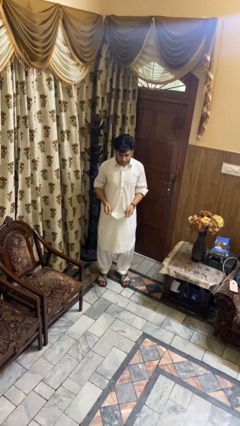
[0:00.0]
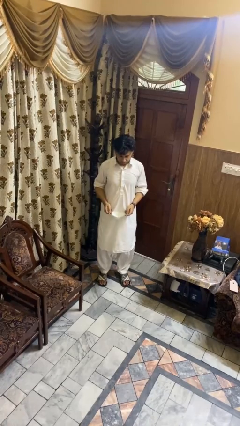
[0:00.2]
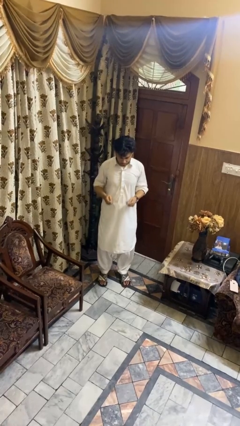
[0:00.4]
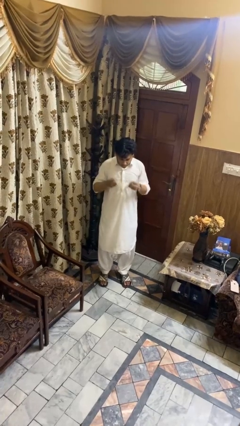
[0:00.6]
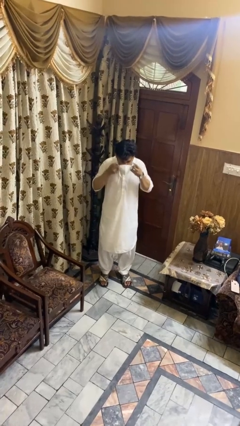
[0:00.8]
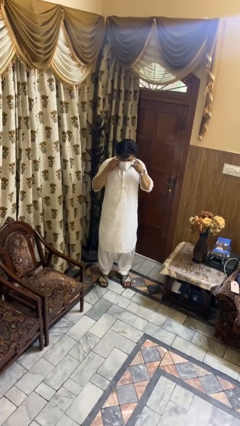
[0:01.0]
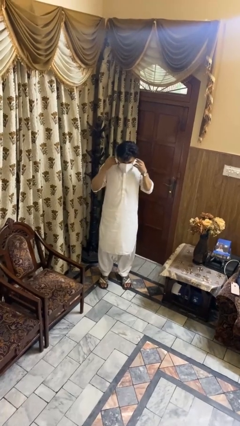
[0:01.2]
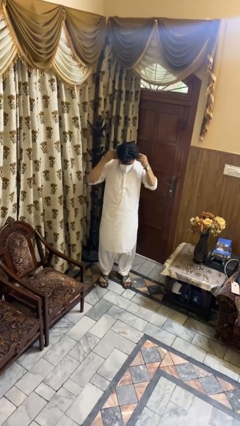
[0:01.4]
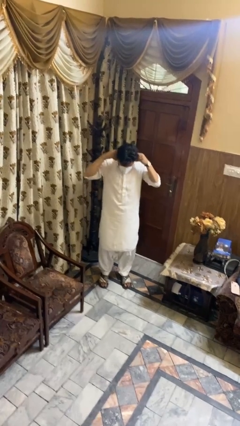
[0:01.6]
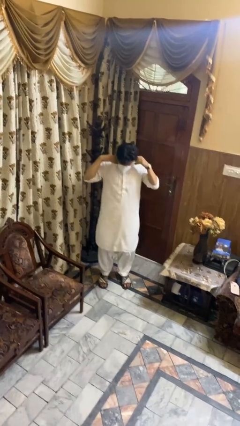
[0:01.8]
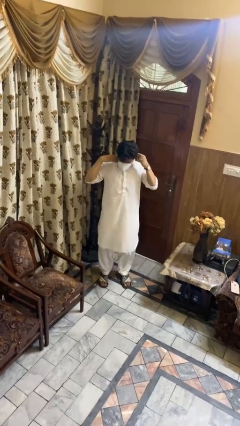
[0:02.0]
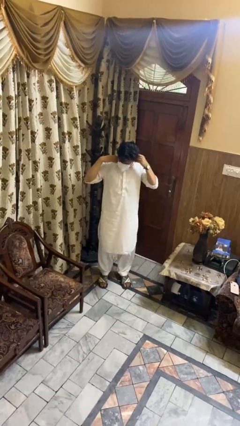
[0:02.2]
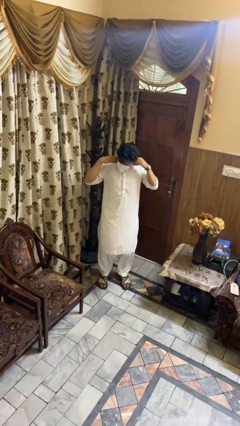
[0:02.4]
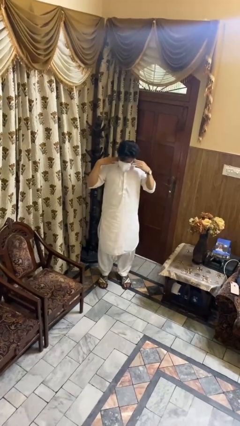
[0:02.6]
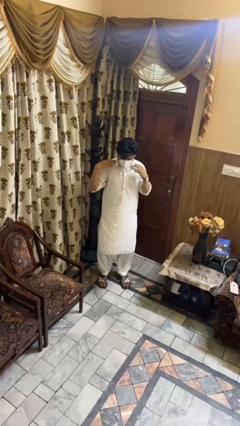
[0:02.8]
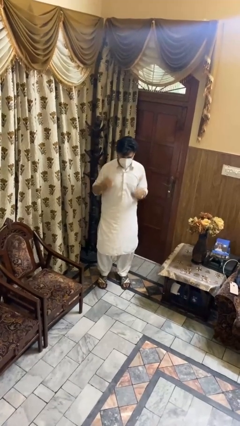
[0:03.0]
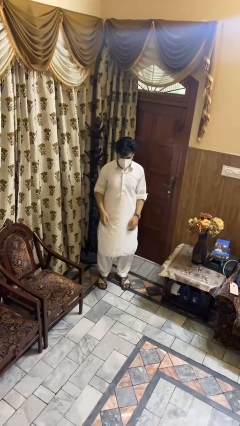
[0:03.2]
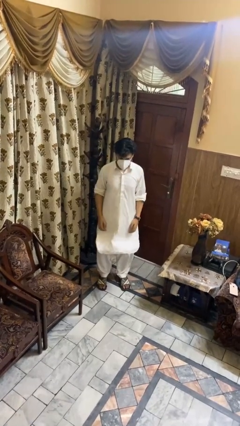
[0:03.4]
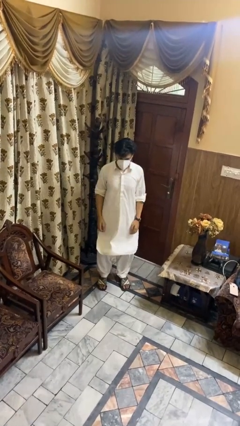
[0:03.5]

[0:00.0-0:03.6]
person puts on facemask

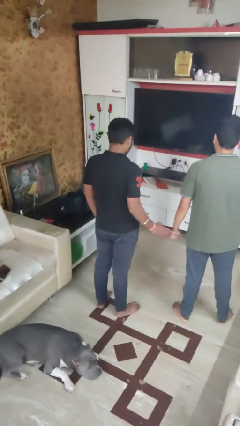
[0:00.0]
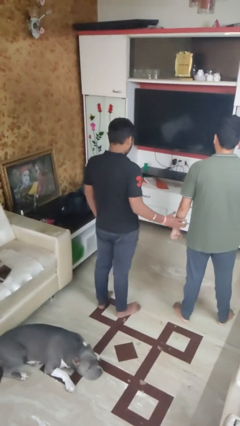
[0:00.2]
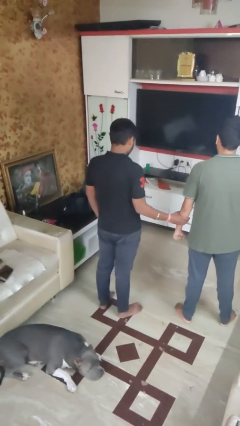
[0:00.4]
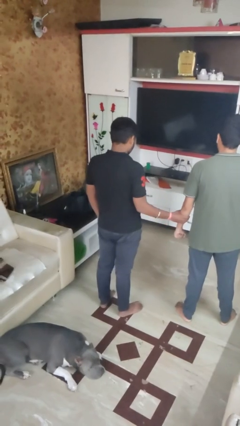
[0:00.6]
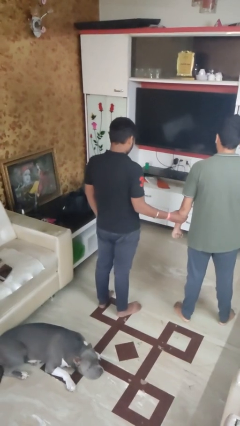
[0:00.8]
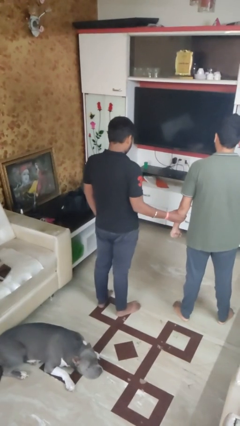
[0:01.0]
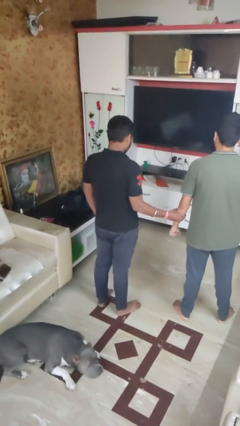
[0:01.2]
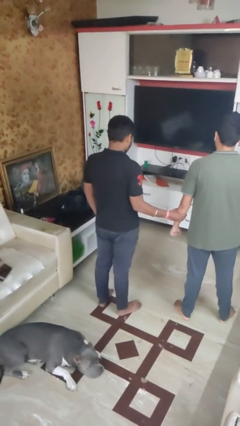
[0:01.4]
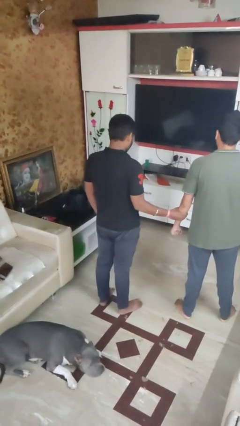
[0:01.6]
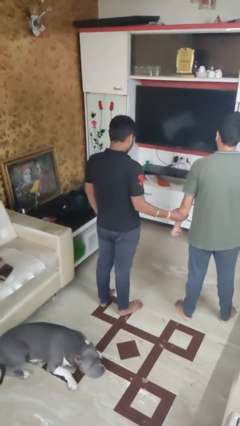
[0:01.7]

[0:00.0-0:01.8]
person grabs person by forearm

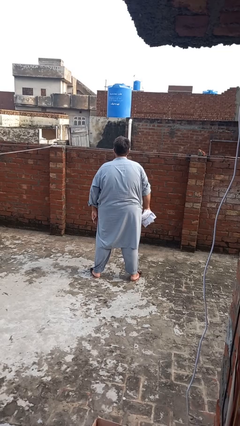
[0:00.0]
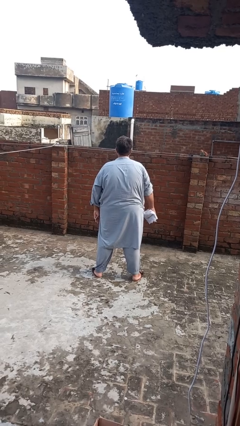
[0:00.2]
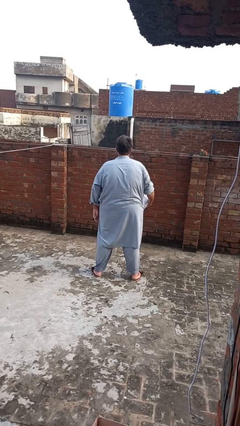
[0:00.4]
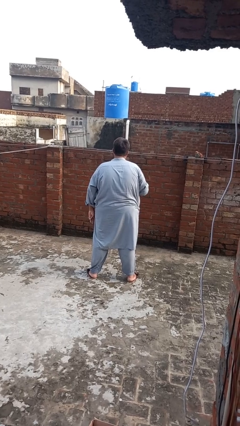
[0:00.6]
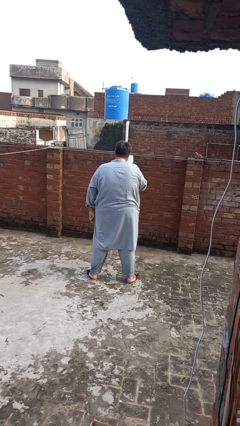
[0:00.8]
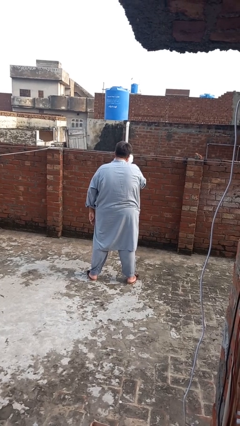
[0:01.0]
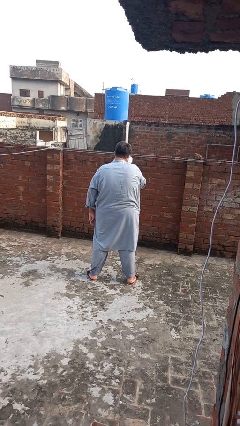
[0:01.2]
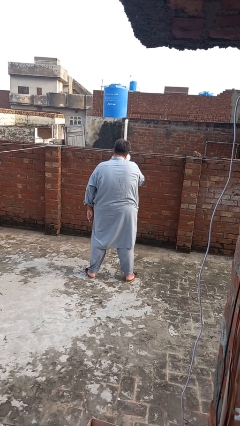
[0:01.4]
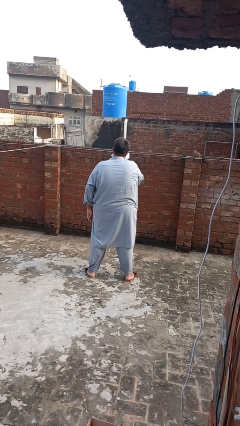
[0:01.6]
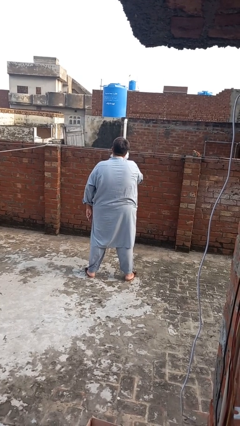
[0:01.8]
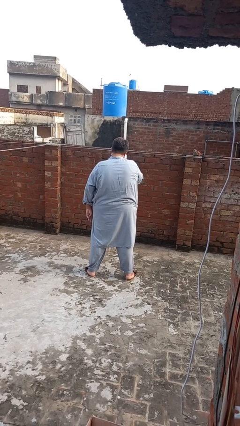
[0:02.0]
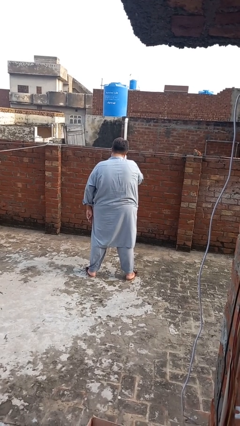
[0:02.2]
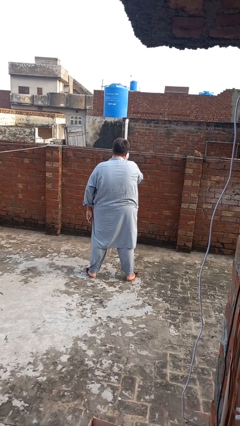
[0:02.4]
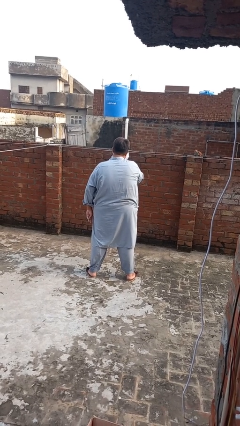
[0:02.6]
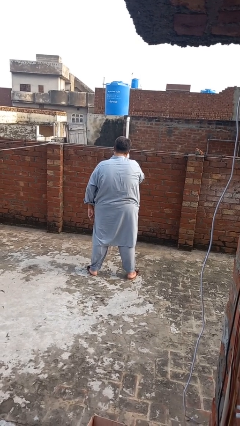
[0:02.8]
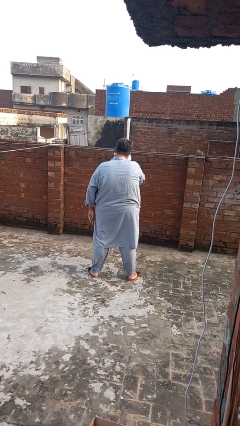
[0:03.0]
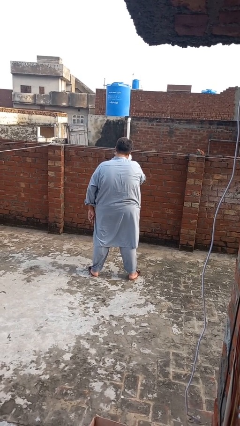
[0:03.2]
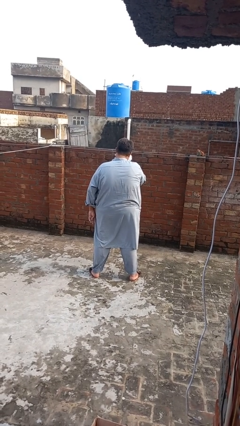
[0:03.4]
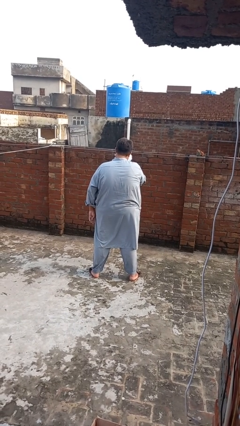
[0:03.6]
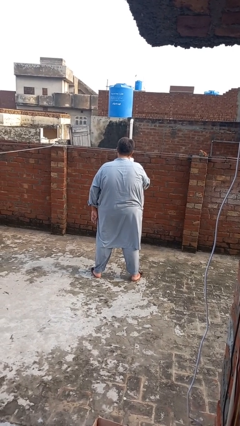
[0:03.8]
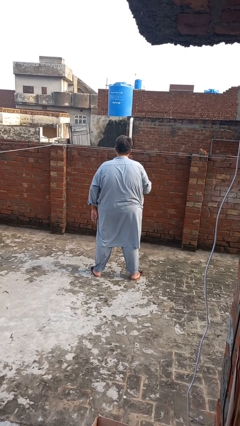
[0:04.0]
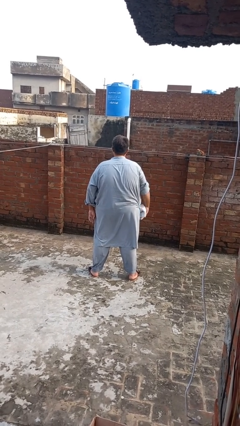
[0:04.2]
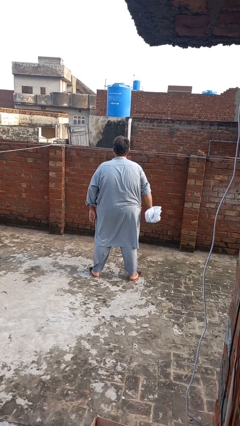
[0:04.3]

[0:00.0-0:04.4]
person blows nose

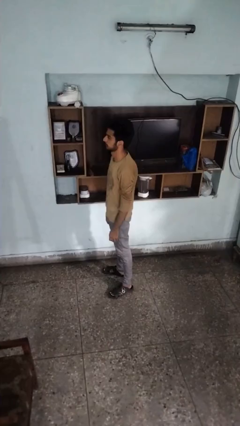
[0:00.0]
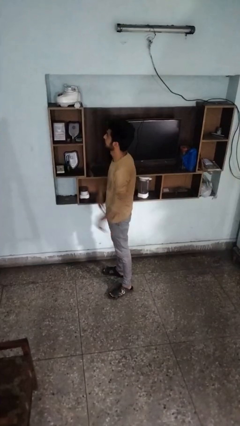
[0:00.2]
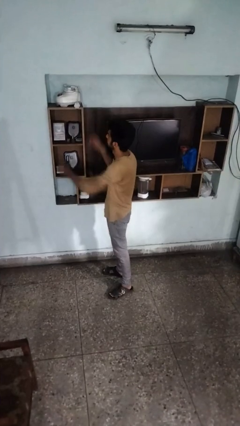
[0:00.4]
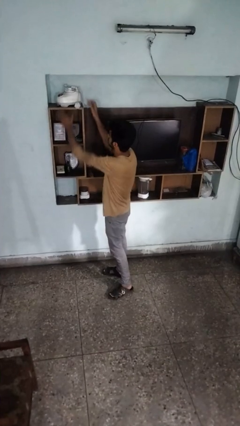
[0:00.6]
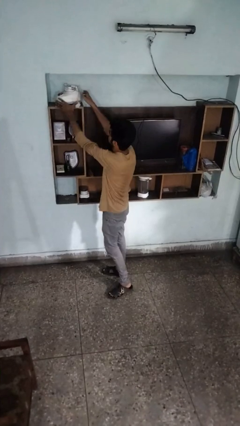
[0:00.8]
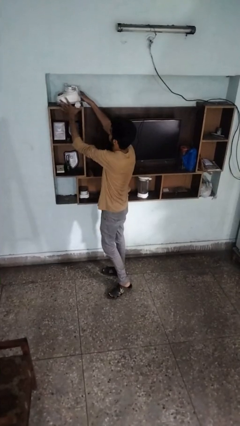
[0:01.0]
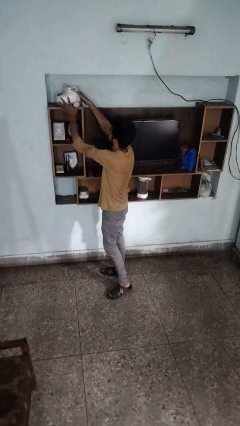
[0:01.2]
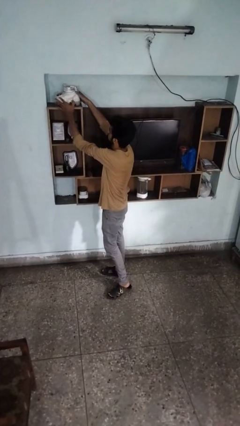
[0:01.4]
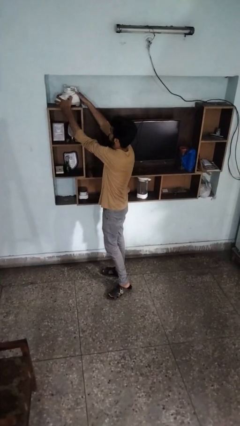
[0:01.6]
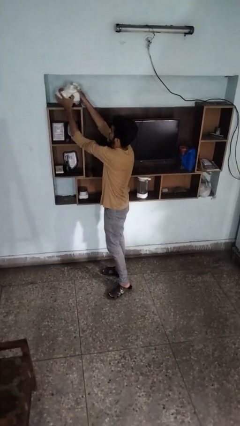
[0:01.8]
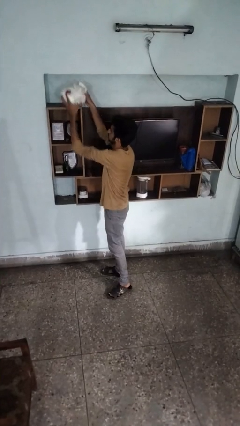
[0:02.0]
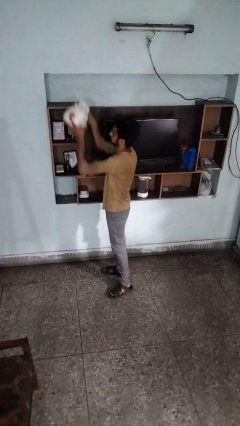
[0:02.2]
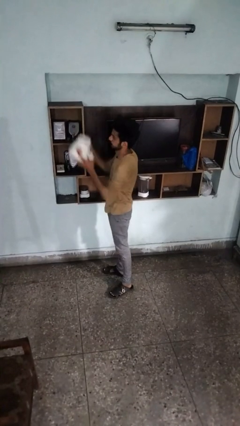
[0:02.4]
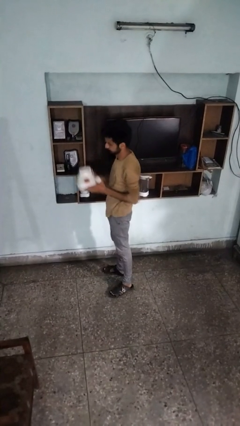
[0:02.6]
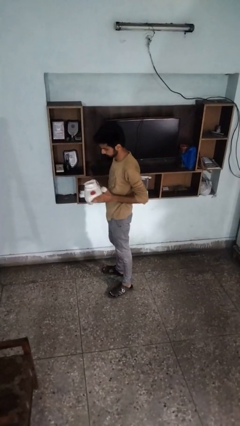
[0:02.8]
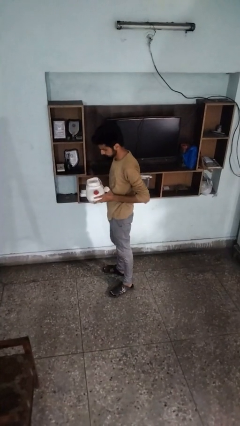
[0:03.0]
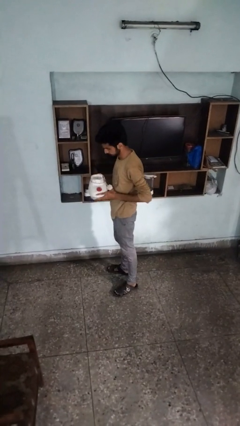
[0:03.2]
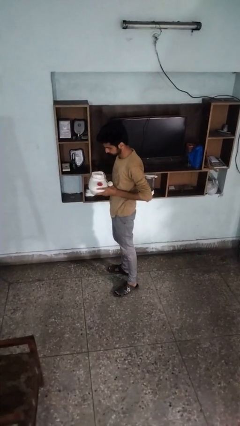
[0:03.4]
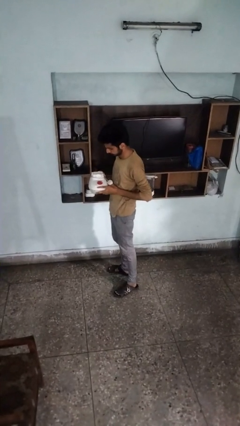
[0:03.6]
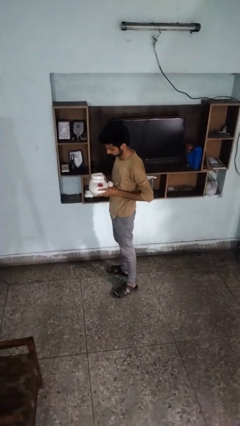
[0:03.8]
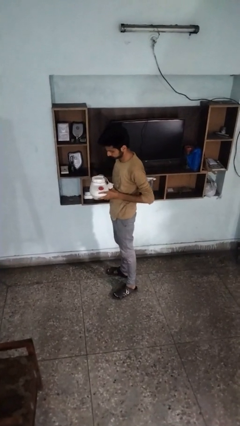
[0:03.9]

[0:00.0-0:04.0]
person picks up object from shelf

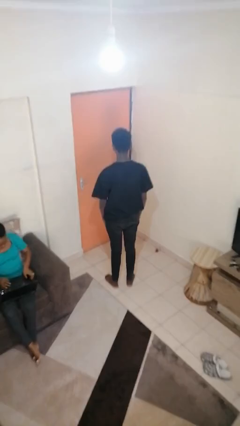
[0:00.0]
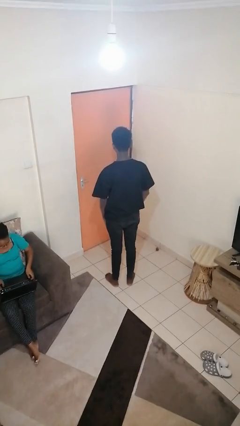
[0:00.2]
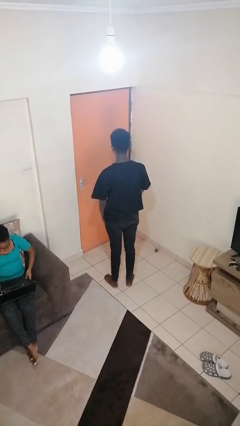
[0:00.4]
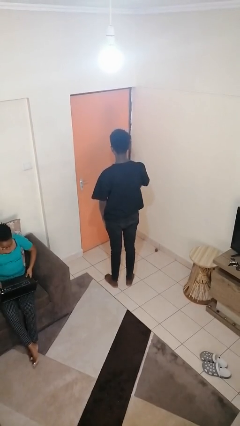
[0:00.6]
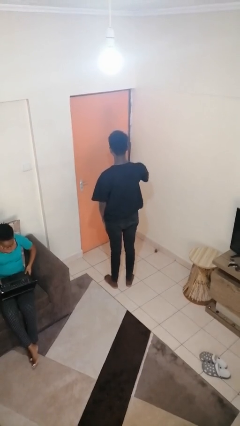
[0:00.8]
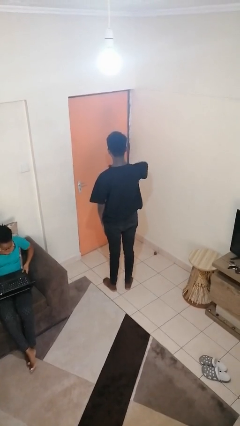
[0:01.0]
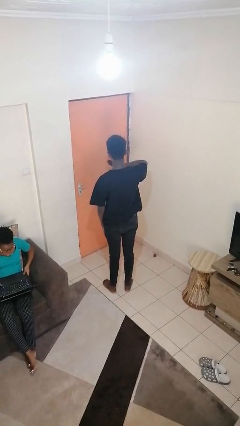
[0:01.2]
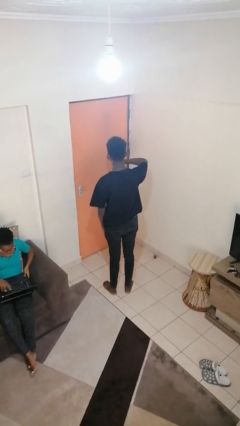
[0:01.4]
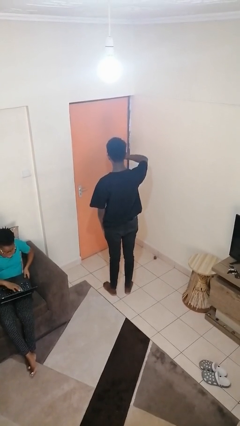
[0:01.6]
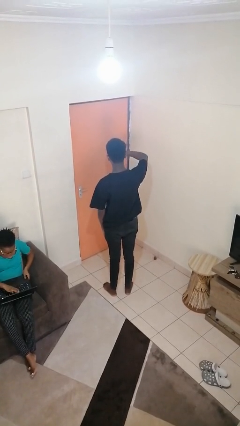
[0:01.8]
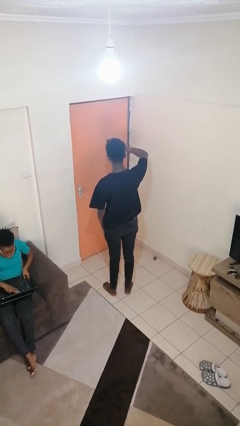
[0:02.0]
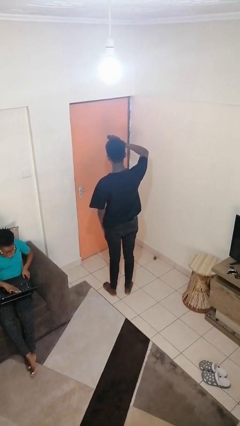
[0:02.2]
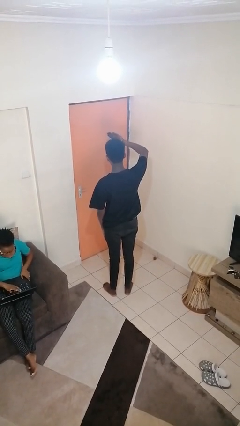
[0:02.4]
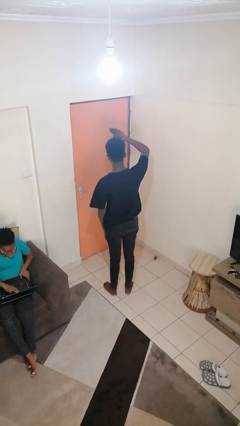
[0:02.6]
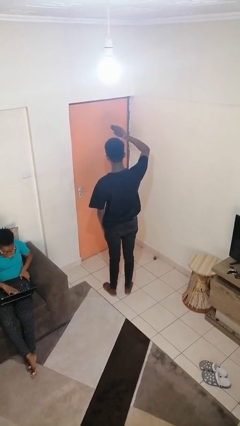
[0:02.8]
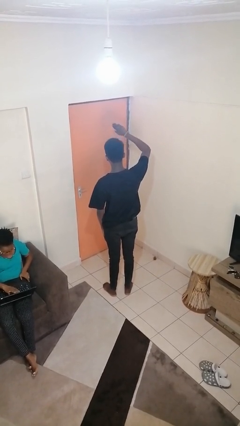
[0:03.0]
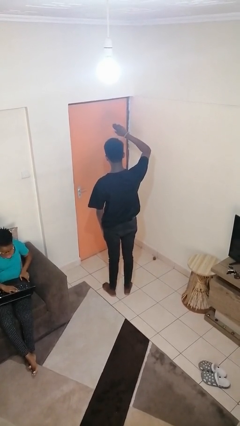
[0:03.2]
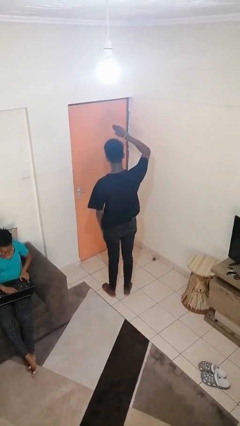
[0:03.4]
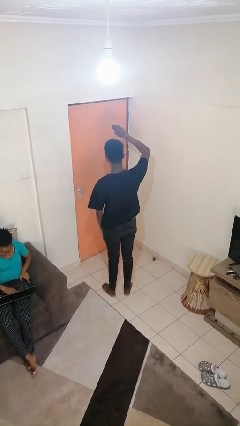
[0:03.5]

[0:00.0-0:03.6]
person gestures swipe up

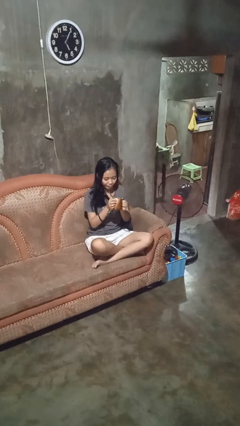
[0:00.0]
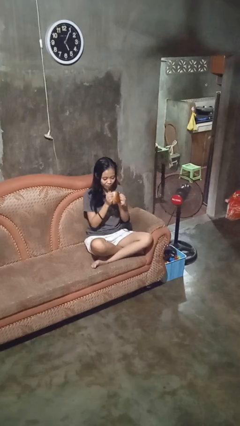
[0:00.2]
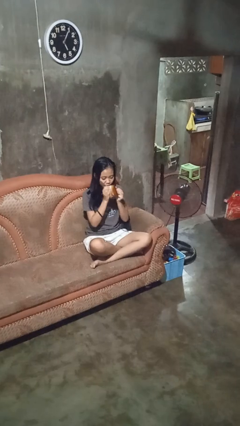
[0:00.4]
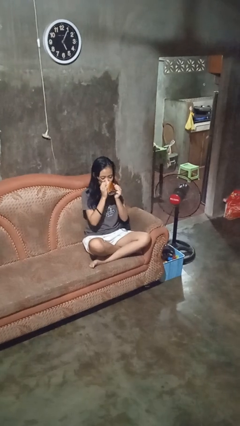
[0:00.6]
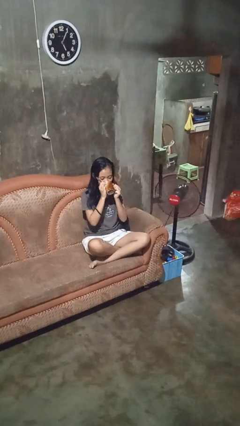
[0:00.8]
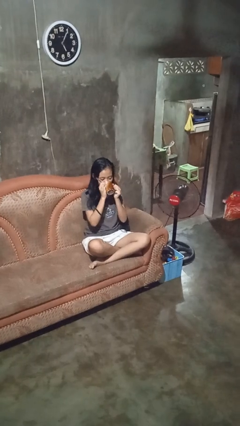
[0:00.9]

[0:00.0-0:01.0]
person drinks from mug
